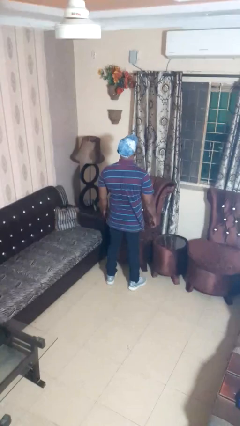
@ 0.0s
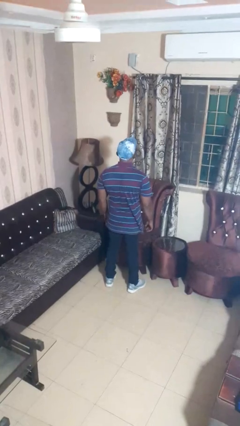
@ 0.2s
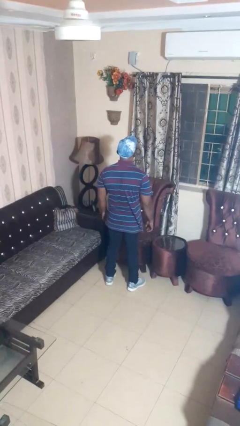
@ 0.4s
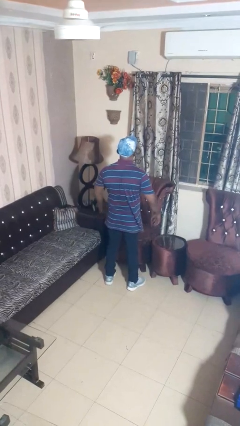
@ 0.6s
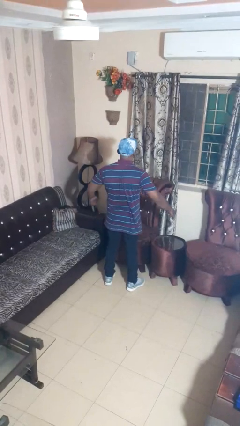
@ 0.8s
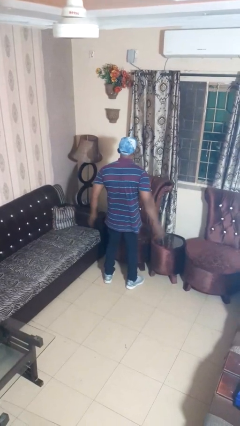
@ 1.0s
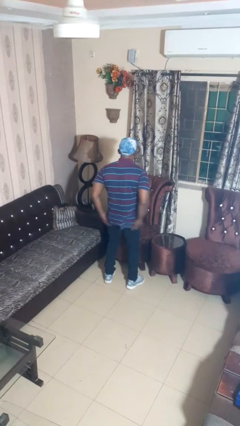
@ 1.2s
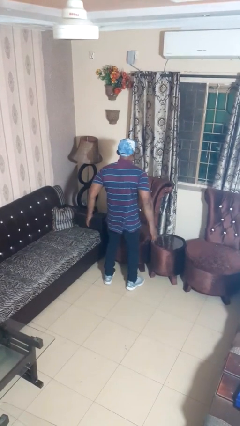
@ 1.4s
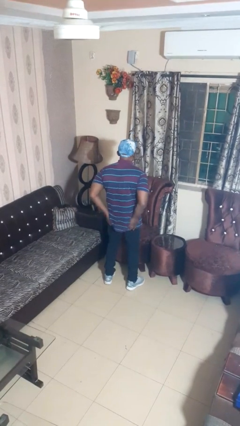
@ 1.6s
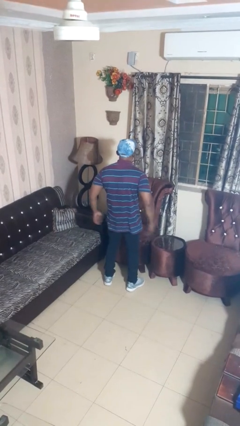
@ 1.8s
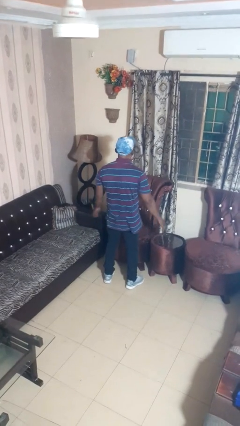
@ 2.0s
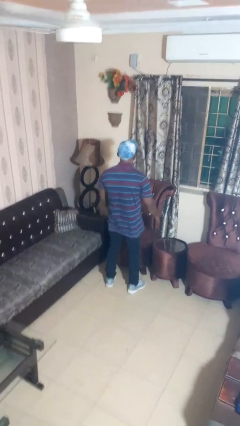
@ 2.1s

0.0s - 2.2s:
person slaps hands on thighs

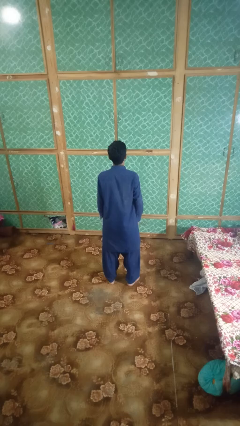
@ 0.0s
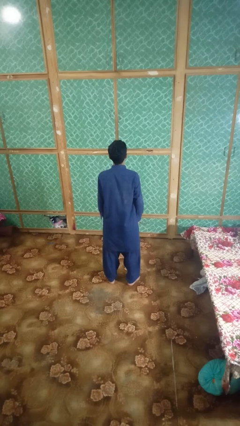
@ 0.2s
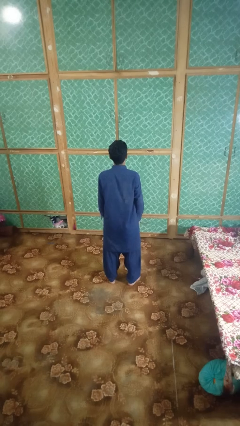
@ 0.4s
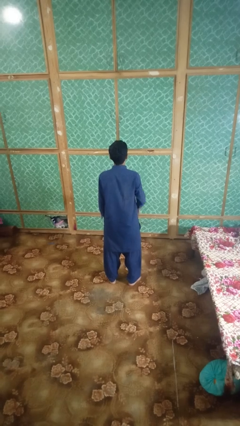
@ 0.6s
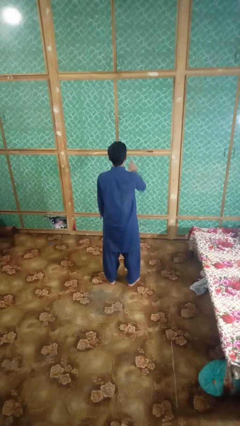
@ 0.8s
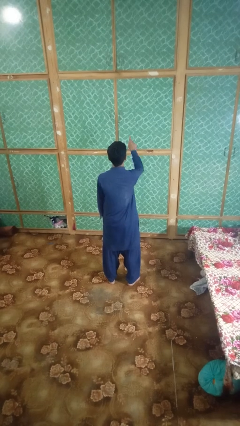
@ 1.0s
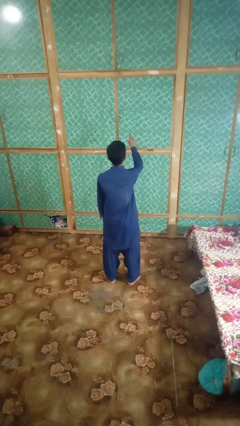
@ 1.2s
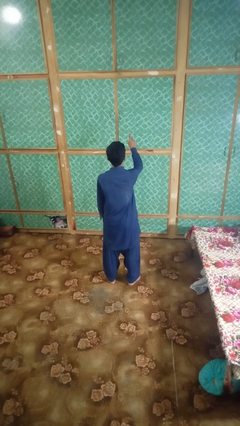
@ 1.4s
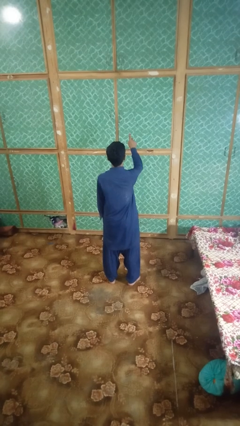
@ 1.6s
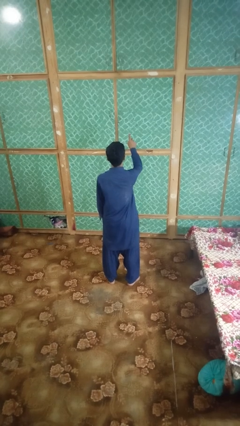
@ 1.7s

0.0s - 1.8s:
person gestures number one

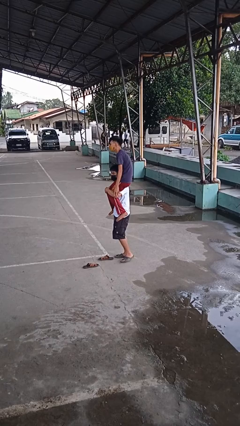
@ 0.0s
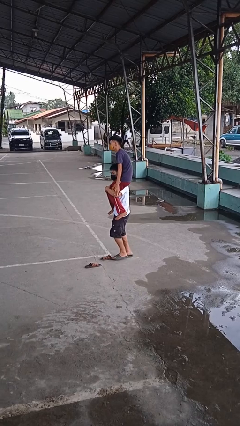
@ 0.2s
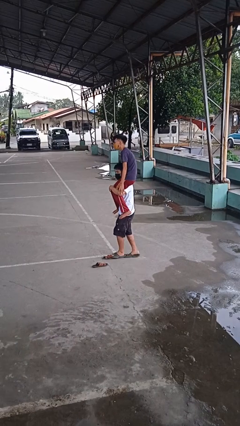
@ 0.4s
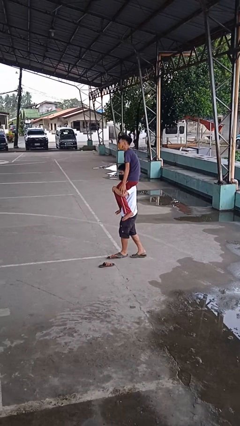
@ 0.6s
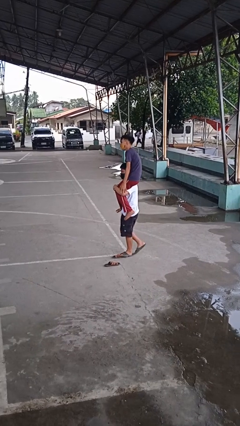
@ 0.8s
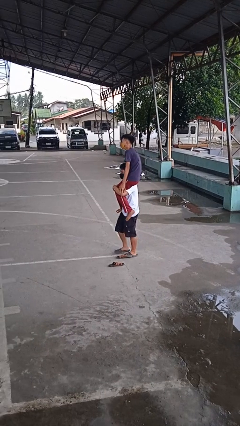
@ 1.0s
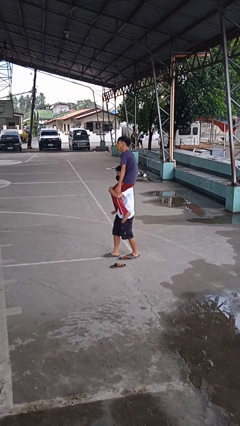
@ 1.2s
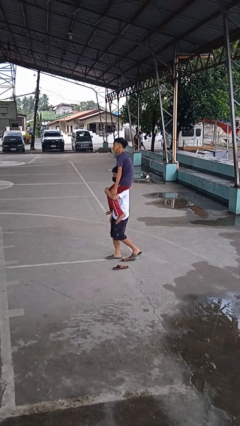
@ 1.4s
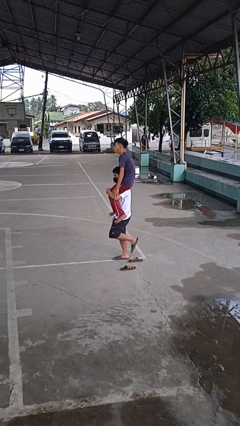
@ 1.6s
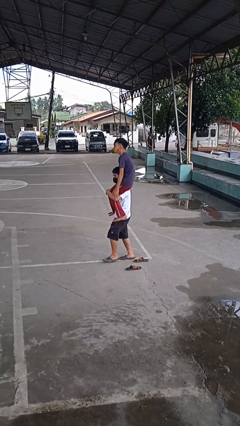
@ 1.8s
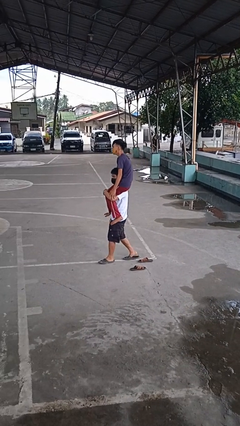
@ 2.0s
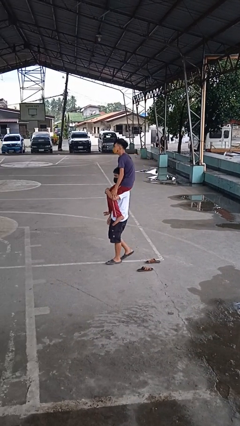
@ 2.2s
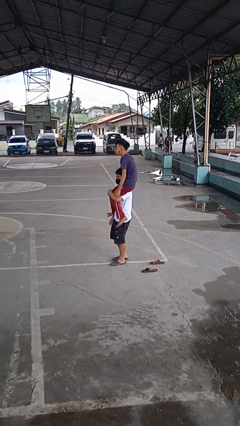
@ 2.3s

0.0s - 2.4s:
person carries person on shoulders

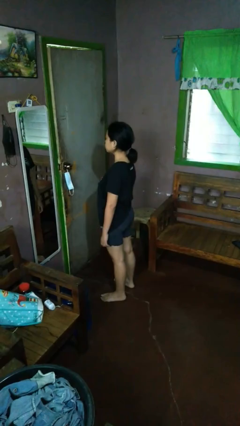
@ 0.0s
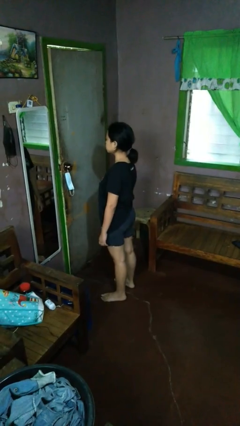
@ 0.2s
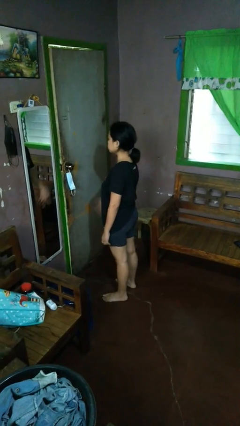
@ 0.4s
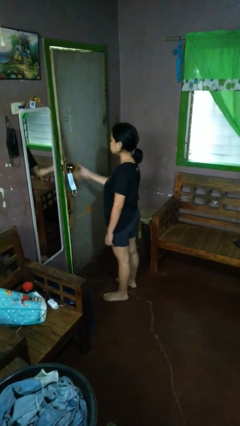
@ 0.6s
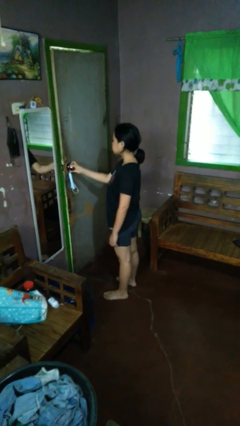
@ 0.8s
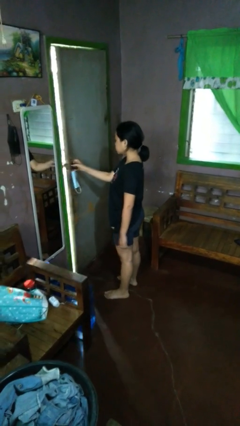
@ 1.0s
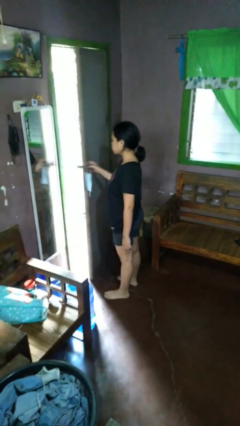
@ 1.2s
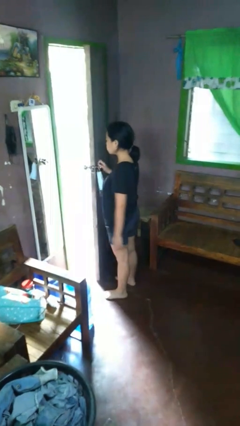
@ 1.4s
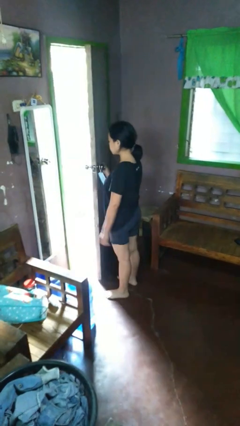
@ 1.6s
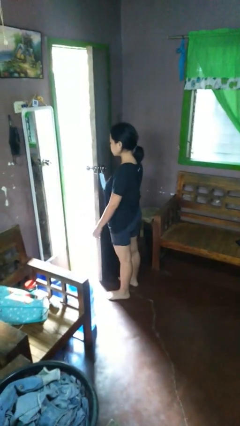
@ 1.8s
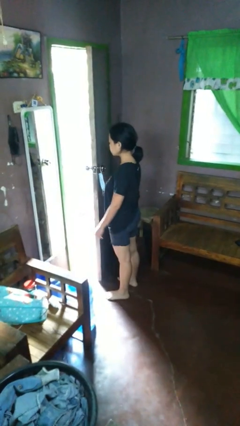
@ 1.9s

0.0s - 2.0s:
person opens facility door

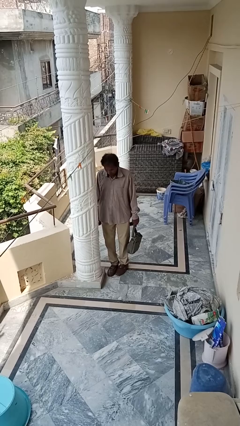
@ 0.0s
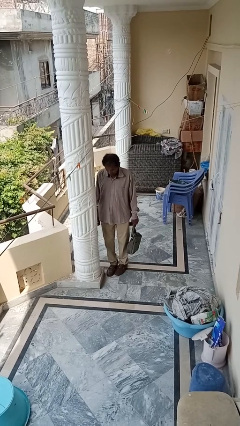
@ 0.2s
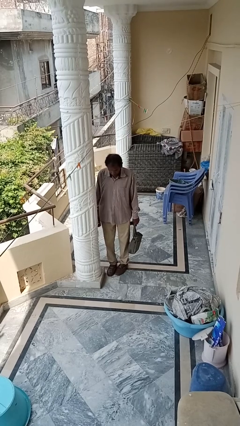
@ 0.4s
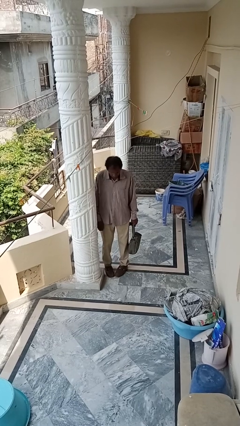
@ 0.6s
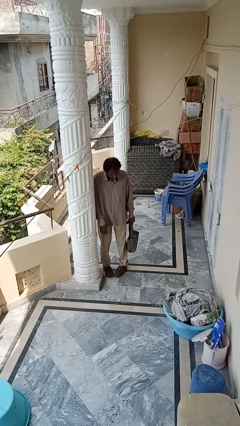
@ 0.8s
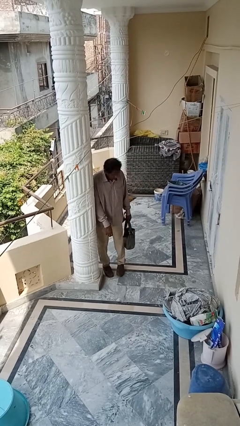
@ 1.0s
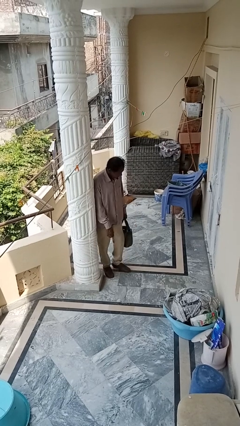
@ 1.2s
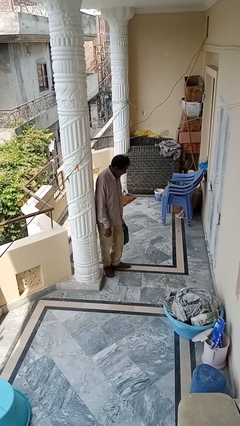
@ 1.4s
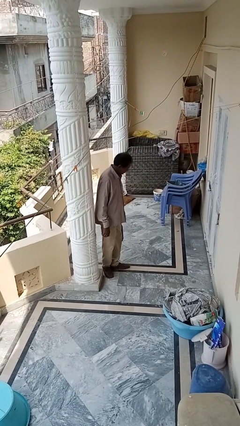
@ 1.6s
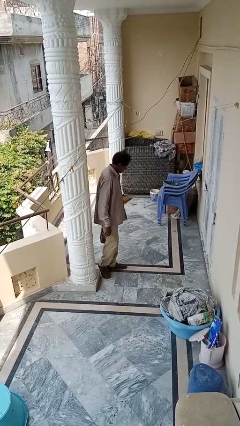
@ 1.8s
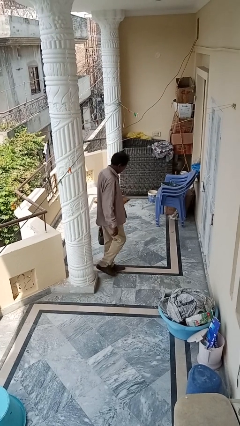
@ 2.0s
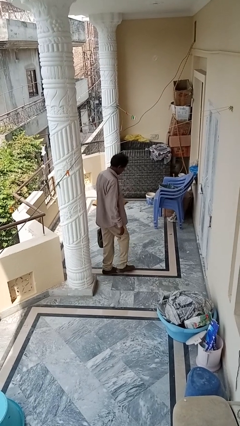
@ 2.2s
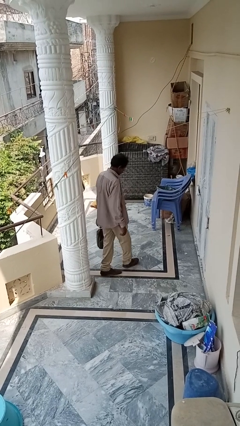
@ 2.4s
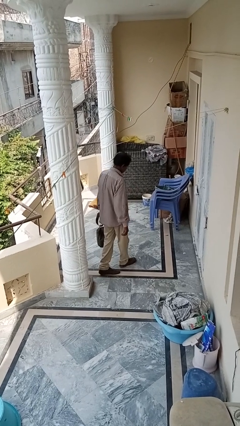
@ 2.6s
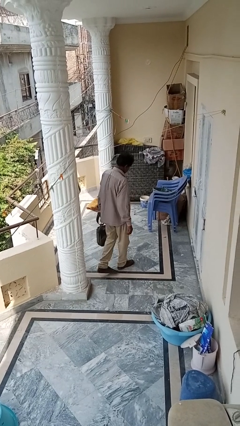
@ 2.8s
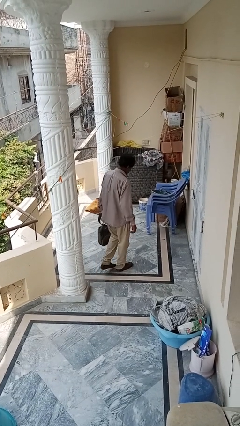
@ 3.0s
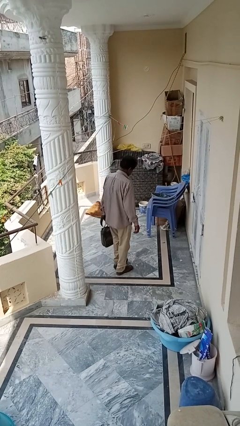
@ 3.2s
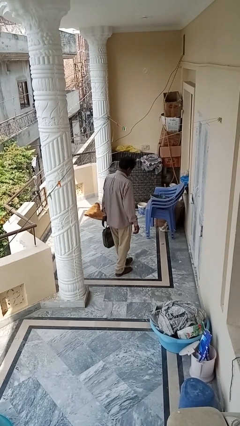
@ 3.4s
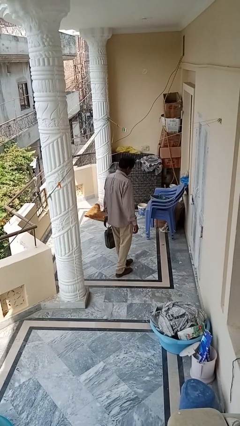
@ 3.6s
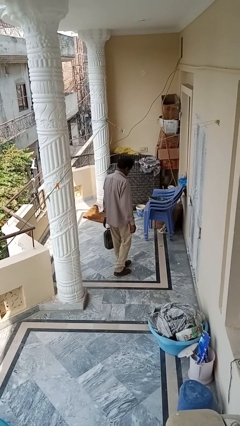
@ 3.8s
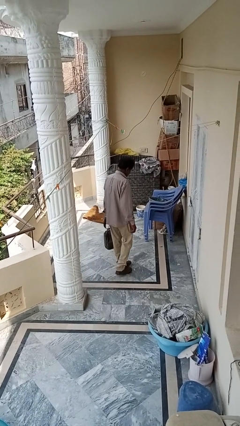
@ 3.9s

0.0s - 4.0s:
person carries groceries

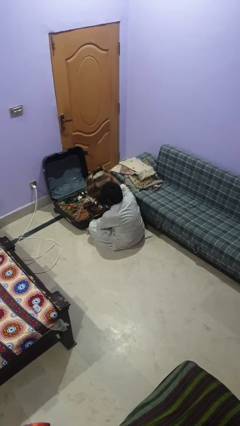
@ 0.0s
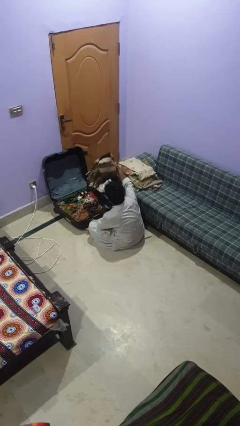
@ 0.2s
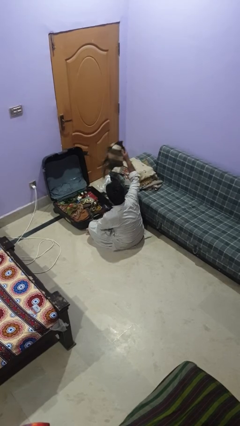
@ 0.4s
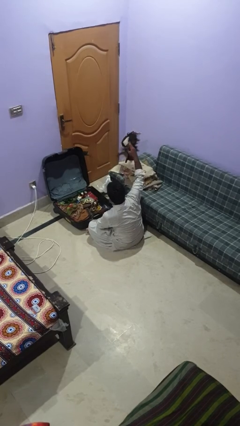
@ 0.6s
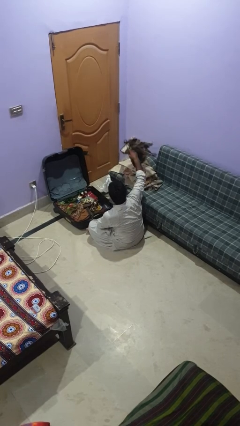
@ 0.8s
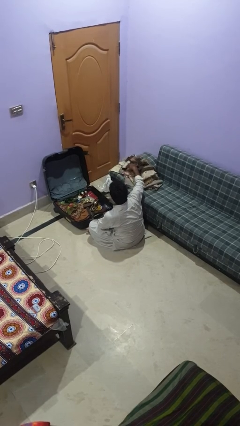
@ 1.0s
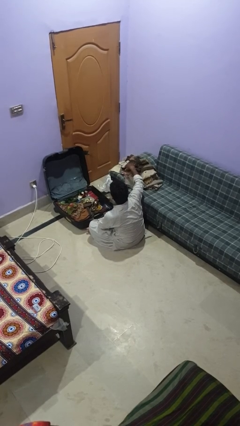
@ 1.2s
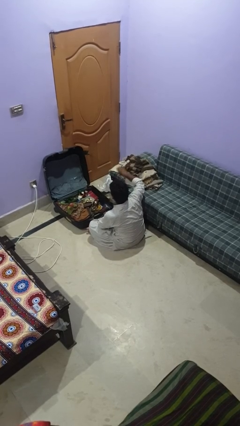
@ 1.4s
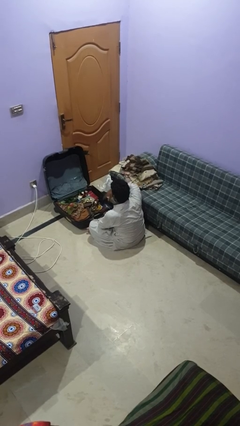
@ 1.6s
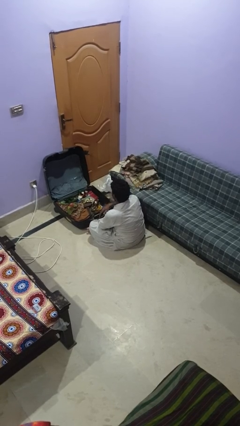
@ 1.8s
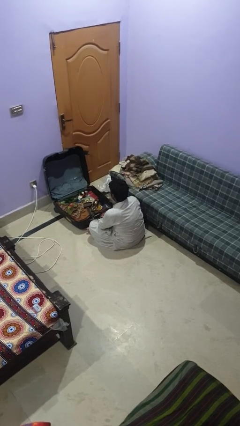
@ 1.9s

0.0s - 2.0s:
person unloads clothes from suitcase

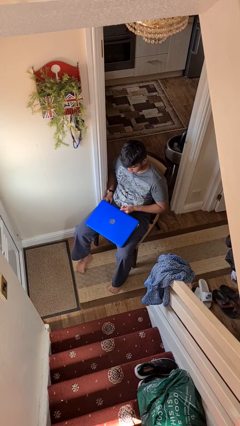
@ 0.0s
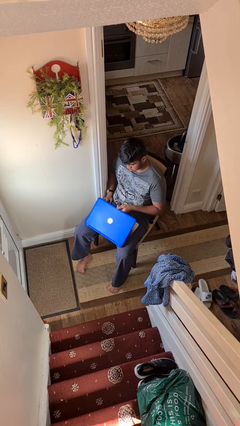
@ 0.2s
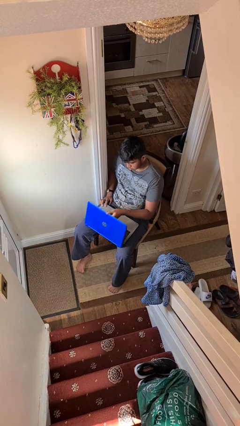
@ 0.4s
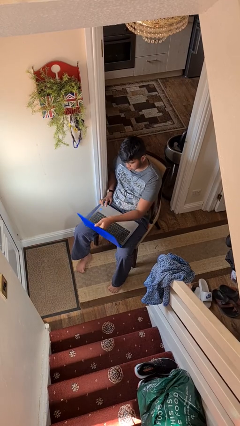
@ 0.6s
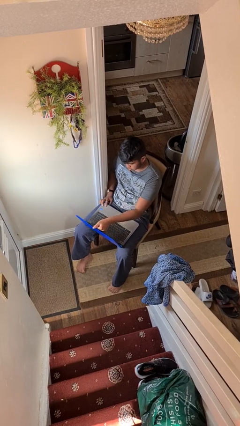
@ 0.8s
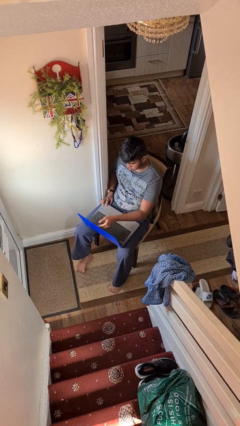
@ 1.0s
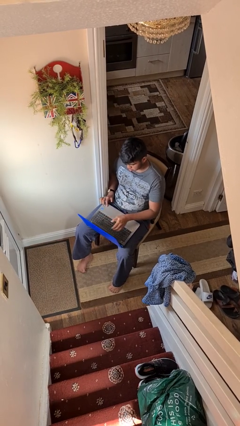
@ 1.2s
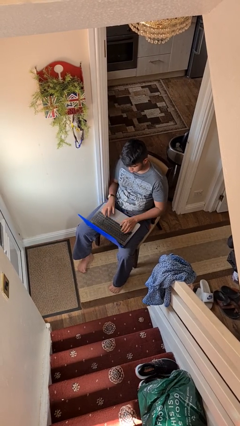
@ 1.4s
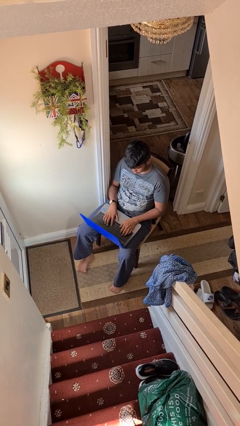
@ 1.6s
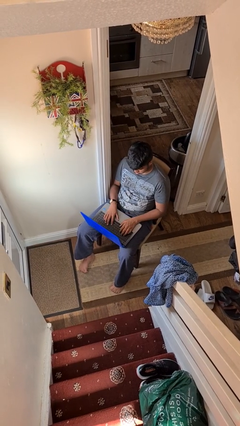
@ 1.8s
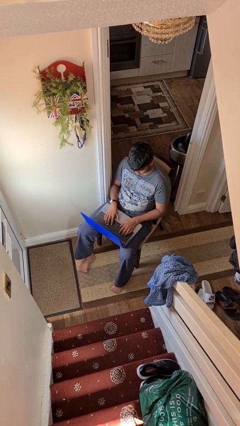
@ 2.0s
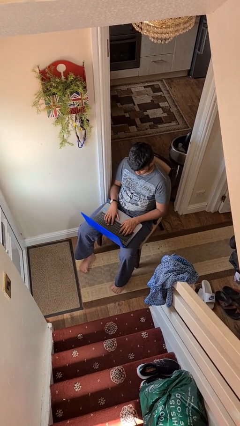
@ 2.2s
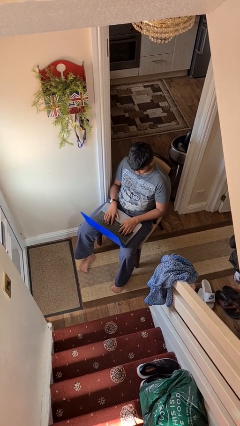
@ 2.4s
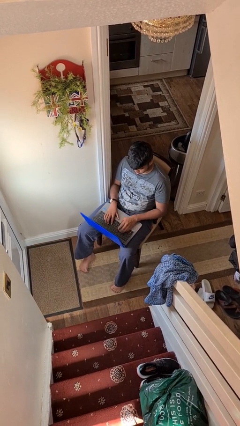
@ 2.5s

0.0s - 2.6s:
person opens laptop

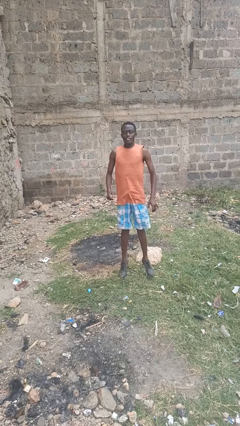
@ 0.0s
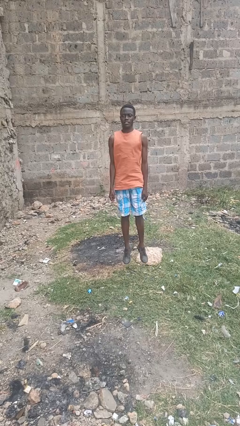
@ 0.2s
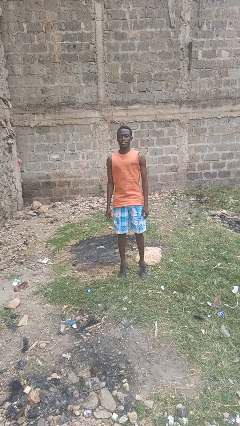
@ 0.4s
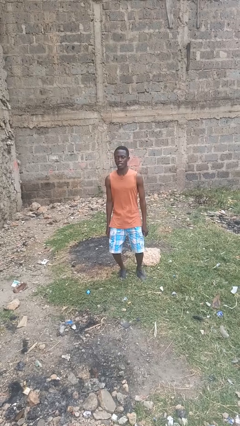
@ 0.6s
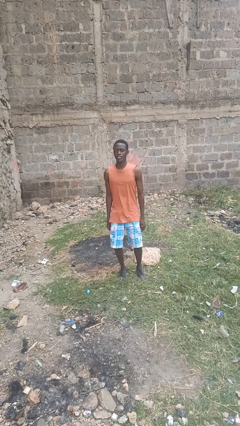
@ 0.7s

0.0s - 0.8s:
person jumps
